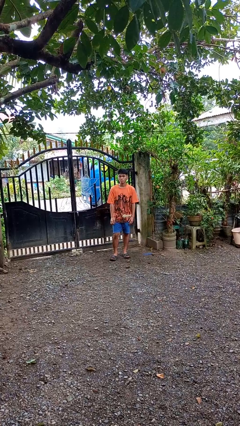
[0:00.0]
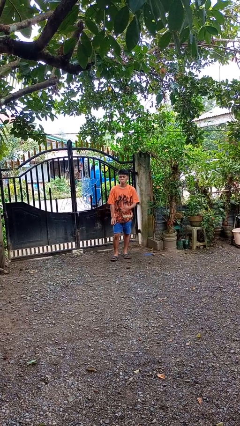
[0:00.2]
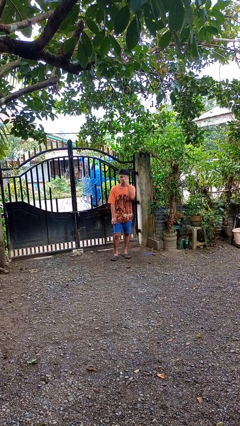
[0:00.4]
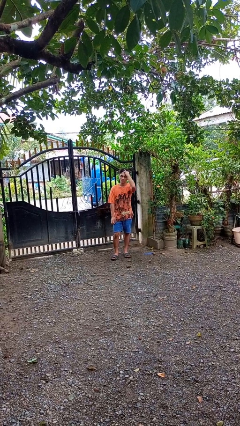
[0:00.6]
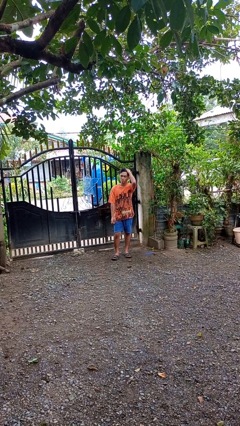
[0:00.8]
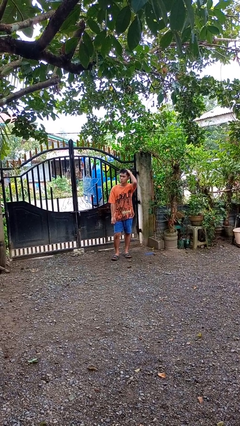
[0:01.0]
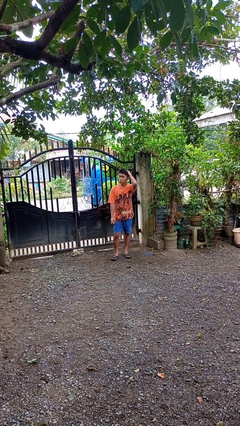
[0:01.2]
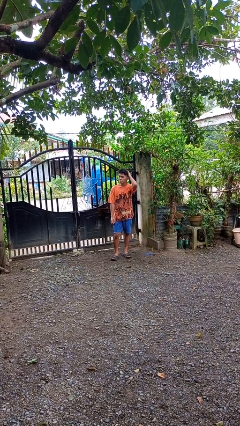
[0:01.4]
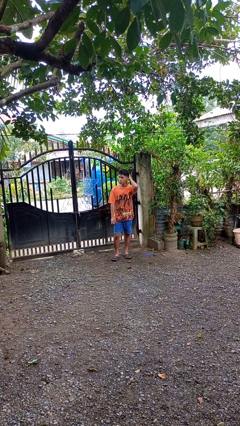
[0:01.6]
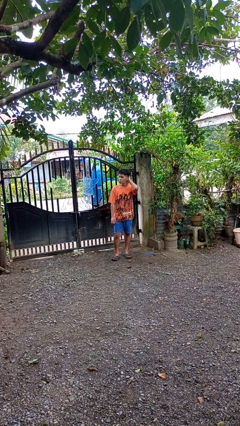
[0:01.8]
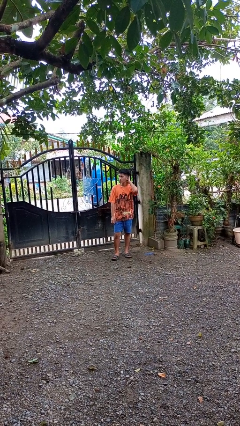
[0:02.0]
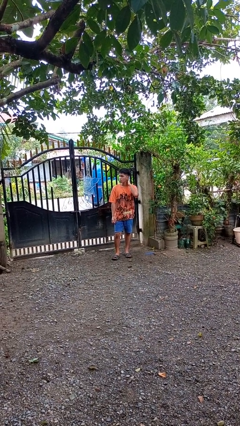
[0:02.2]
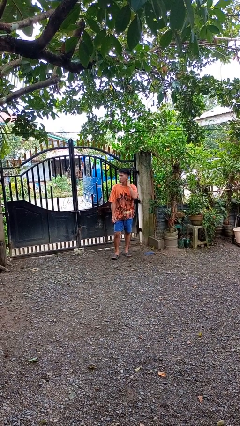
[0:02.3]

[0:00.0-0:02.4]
person strokes hair

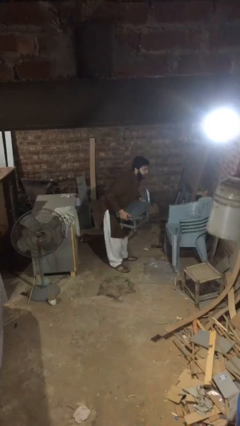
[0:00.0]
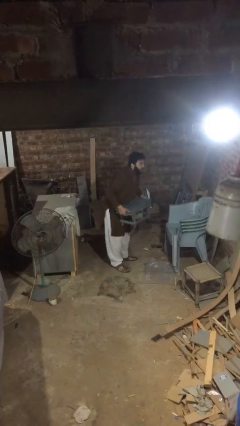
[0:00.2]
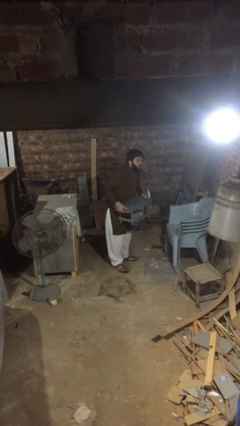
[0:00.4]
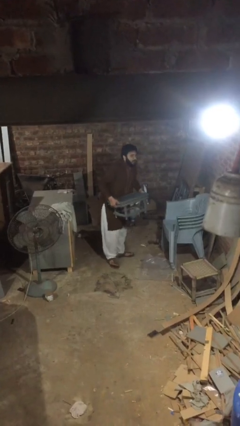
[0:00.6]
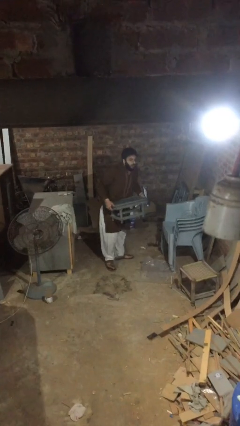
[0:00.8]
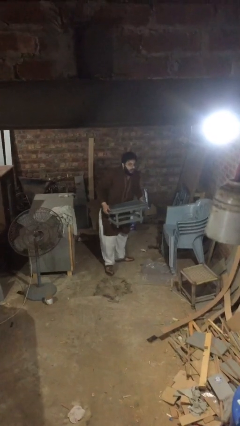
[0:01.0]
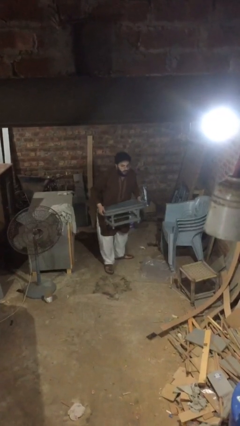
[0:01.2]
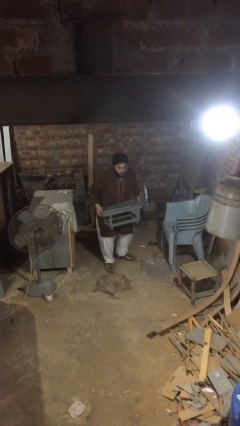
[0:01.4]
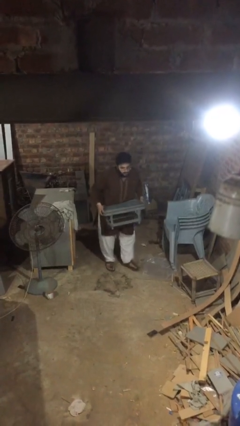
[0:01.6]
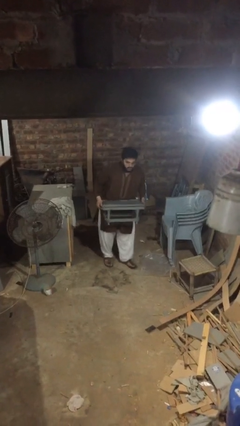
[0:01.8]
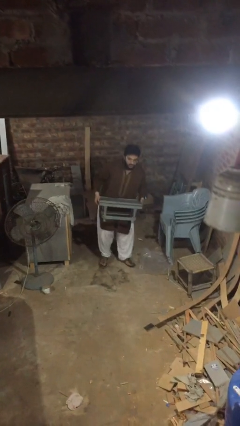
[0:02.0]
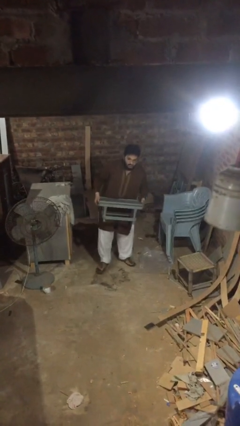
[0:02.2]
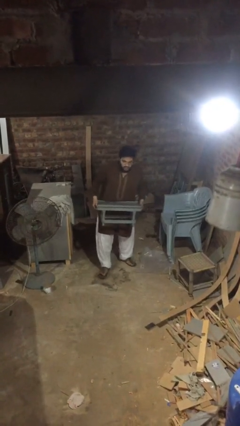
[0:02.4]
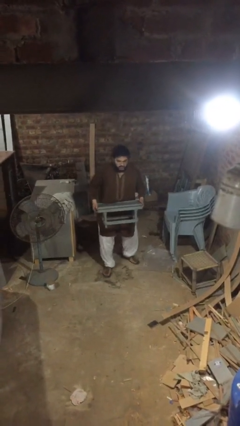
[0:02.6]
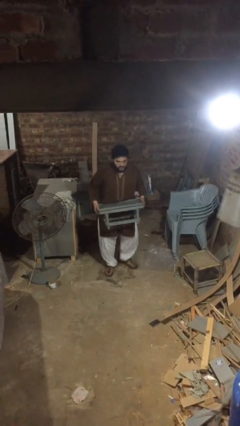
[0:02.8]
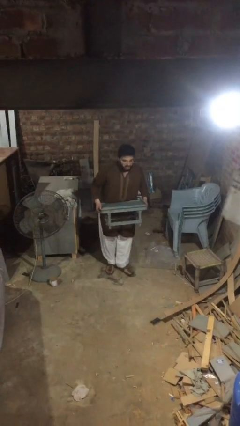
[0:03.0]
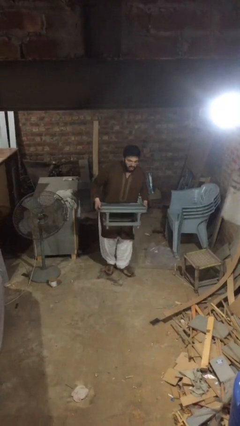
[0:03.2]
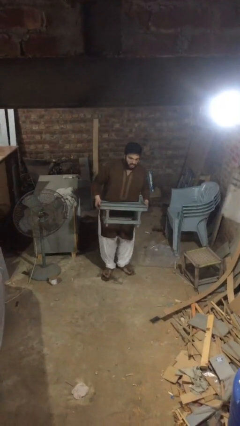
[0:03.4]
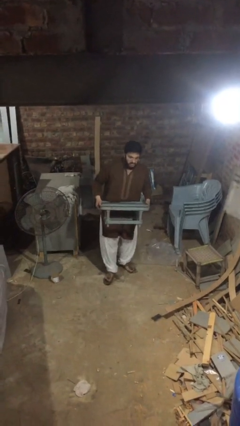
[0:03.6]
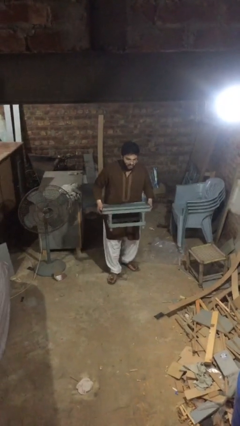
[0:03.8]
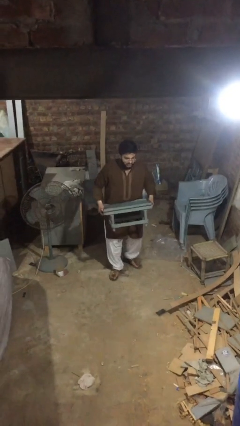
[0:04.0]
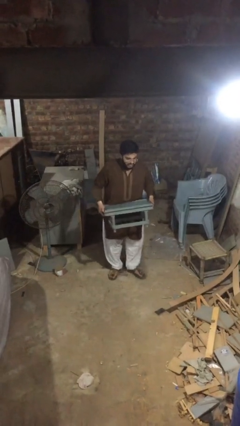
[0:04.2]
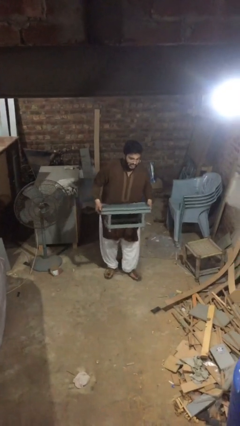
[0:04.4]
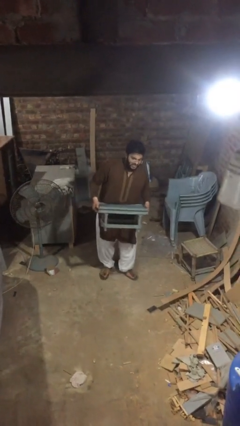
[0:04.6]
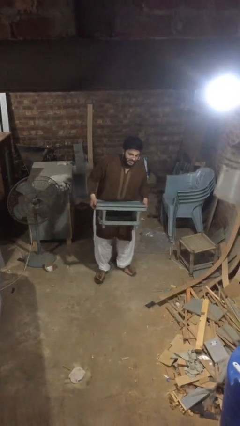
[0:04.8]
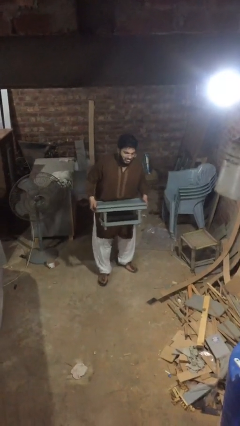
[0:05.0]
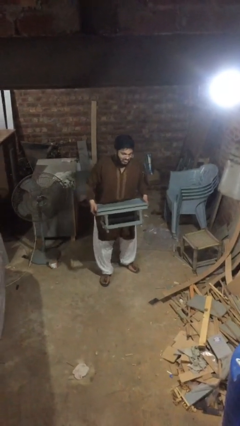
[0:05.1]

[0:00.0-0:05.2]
person carries heavy object

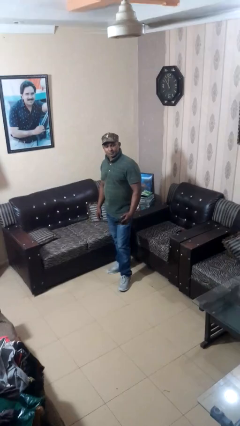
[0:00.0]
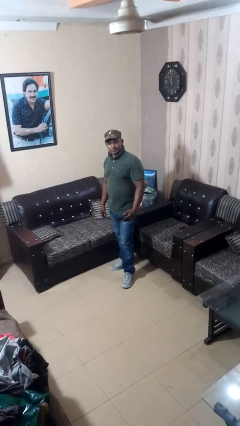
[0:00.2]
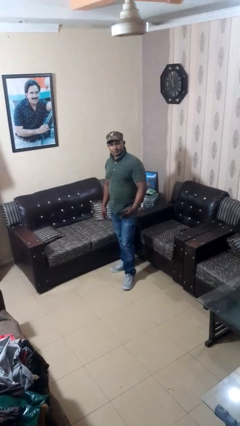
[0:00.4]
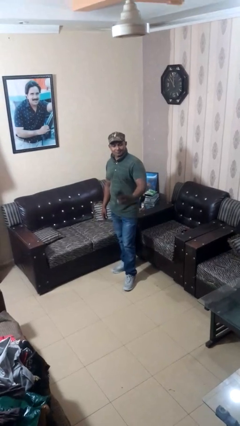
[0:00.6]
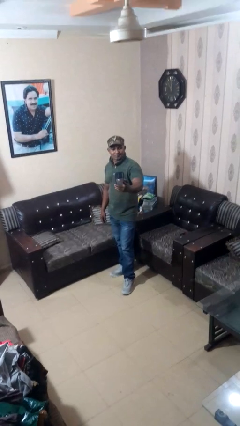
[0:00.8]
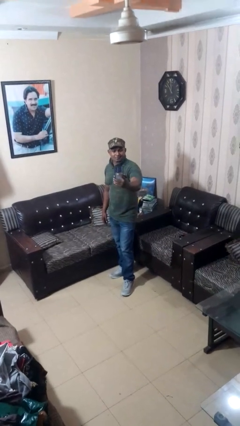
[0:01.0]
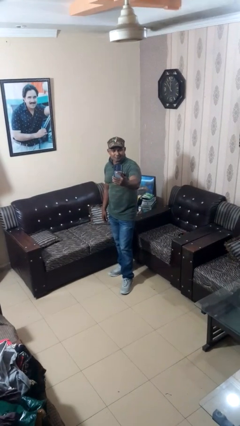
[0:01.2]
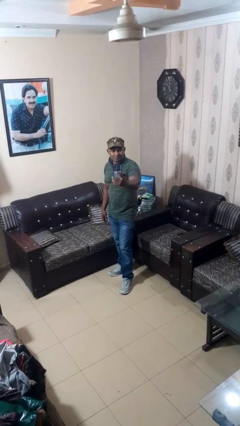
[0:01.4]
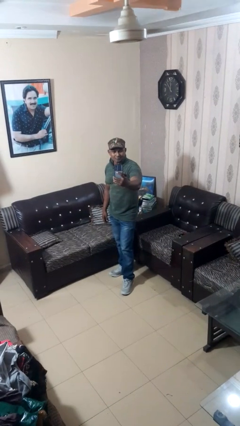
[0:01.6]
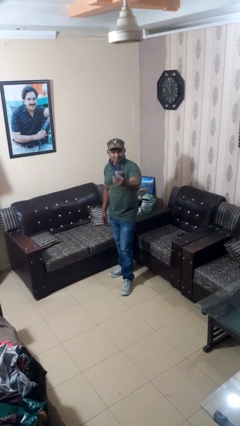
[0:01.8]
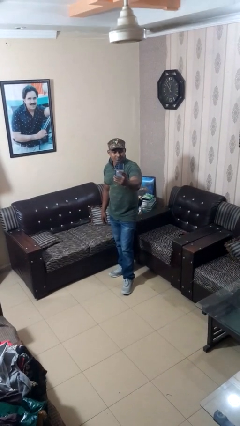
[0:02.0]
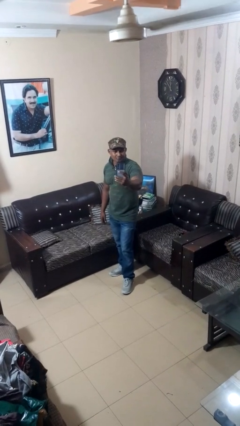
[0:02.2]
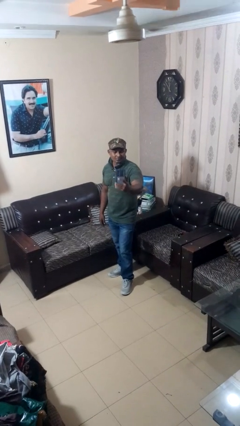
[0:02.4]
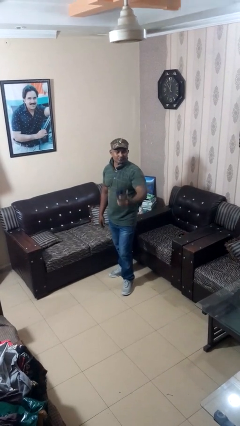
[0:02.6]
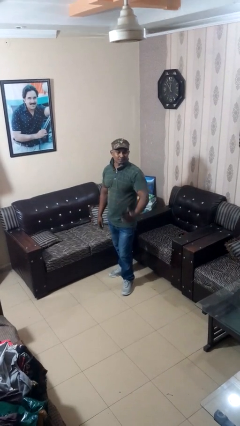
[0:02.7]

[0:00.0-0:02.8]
person takes selfie

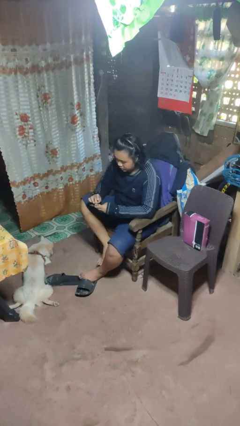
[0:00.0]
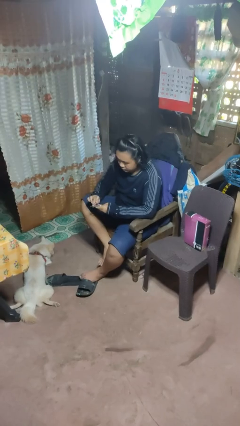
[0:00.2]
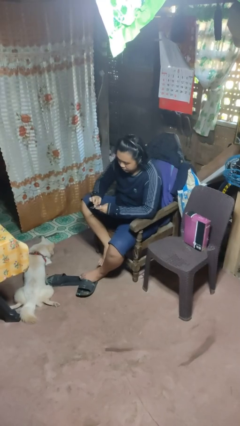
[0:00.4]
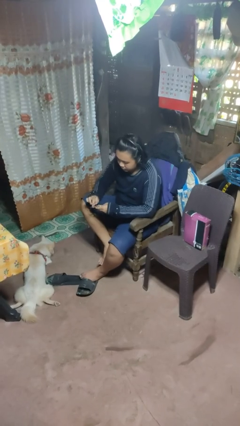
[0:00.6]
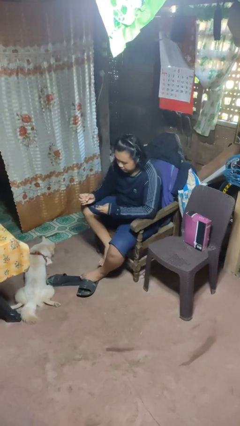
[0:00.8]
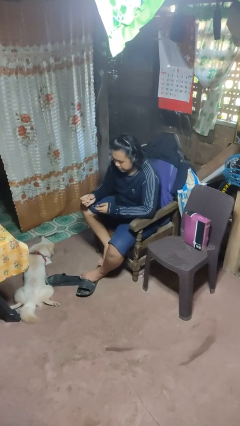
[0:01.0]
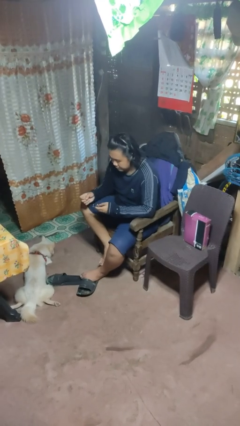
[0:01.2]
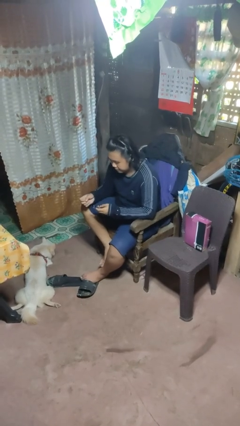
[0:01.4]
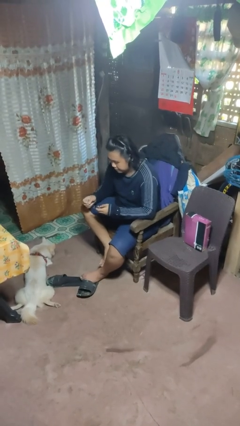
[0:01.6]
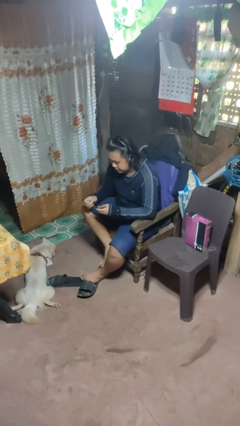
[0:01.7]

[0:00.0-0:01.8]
person files fingernails

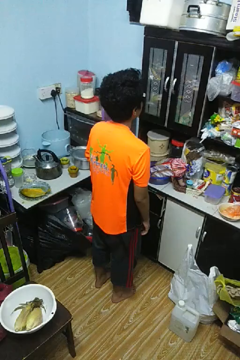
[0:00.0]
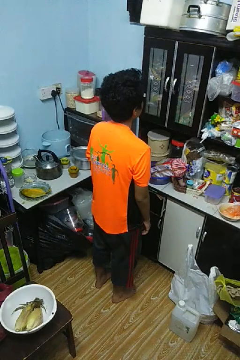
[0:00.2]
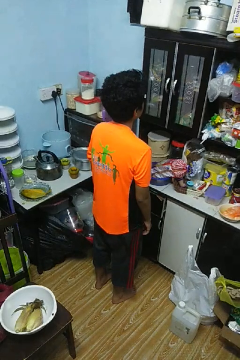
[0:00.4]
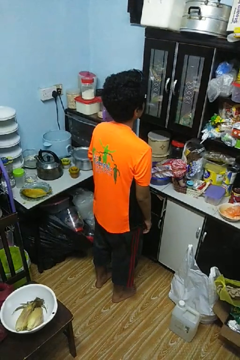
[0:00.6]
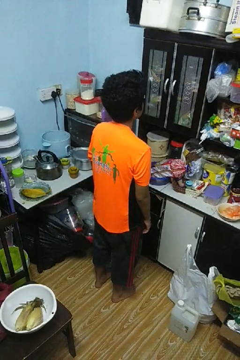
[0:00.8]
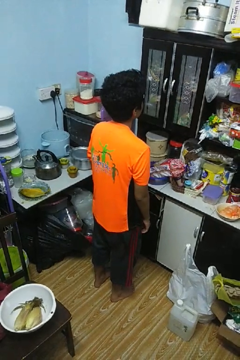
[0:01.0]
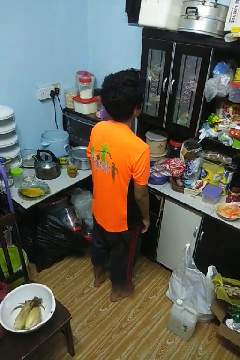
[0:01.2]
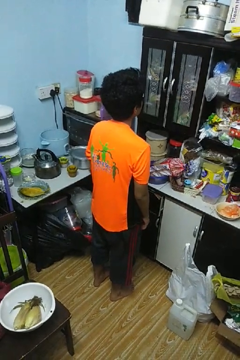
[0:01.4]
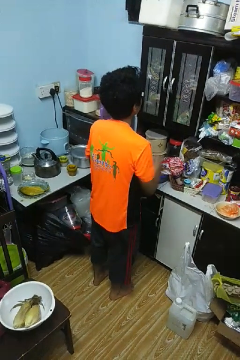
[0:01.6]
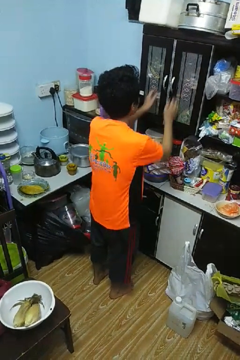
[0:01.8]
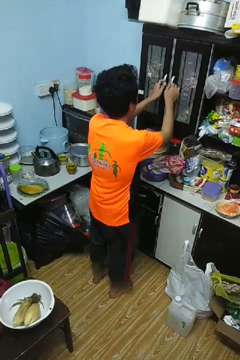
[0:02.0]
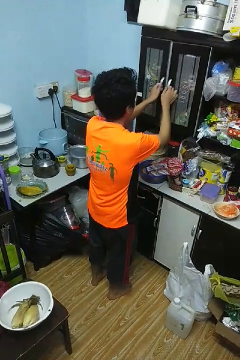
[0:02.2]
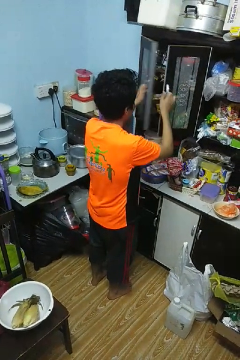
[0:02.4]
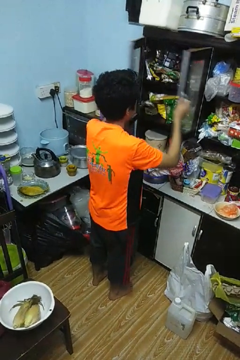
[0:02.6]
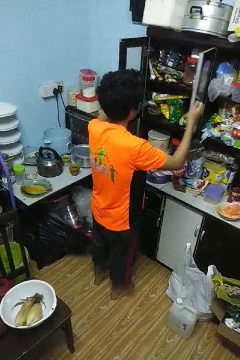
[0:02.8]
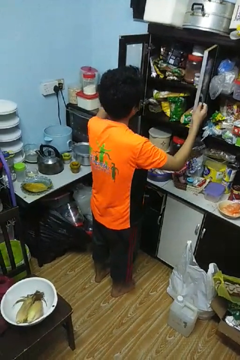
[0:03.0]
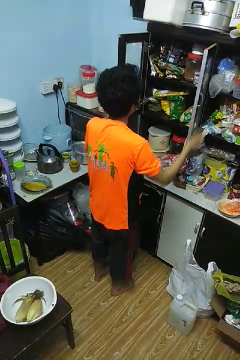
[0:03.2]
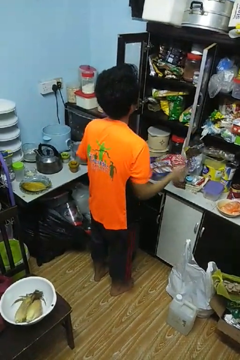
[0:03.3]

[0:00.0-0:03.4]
person opens cabinet

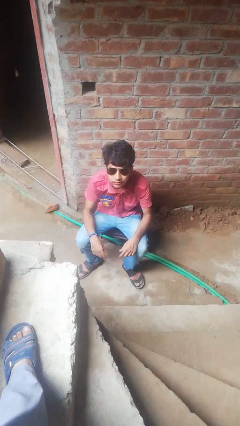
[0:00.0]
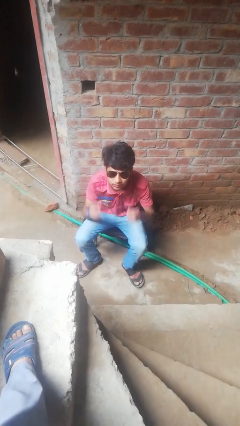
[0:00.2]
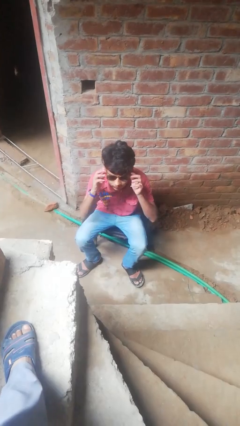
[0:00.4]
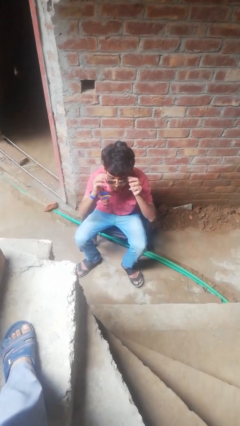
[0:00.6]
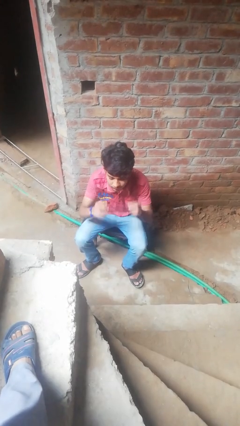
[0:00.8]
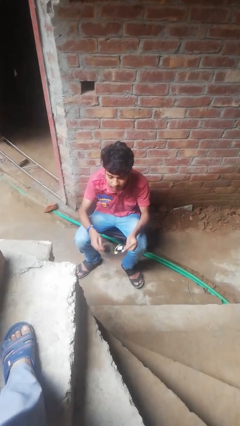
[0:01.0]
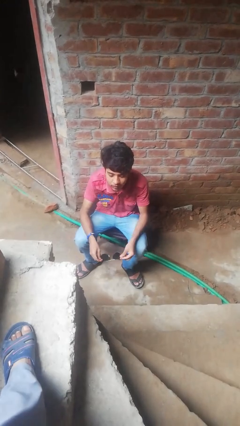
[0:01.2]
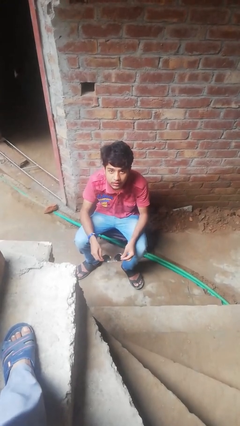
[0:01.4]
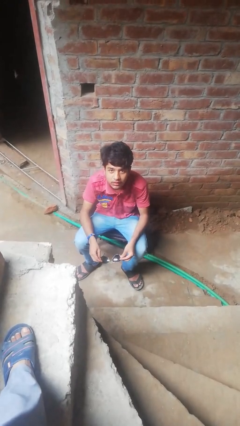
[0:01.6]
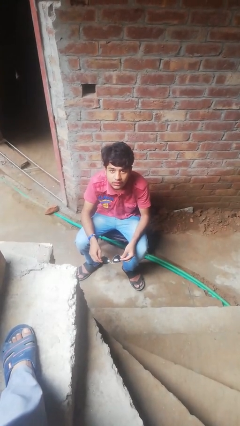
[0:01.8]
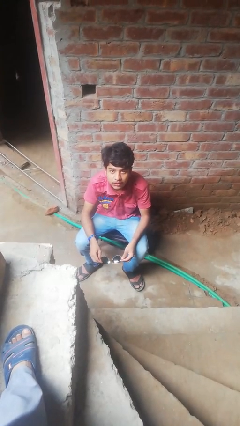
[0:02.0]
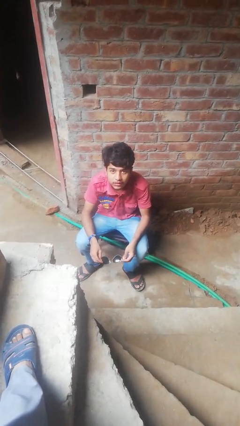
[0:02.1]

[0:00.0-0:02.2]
person takes off glasses

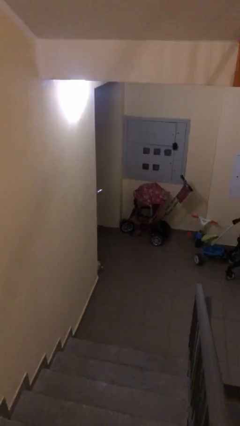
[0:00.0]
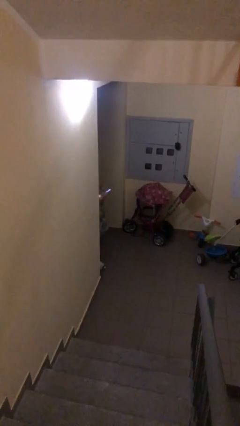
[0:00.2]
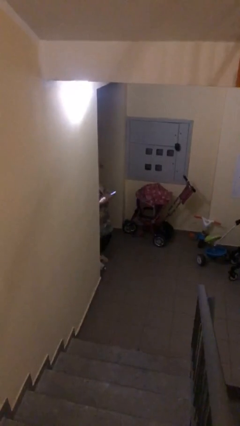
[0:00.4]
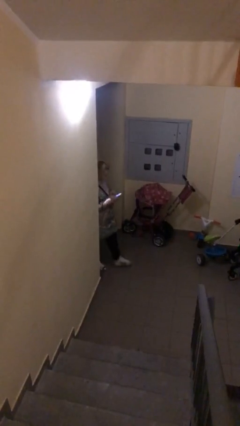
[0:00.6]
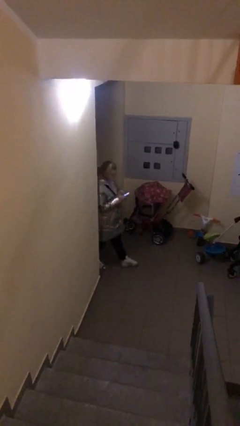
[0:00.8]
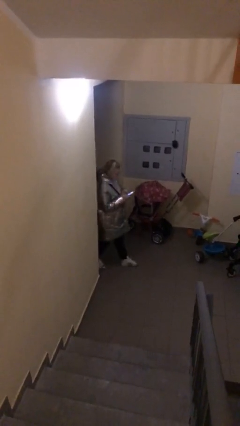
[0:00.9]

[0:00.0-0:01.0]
person enters scene through structure
